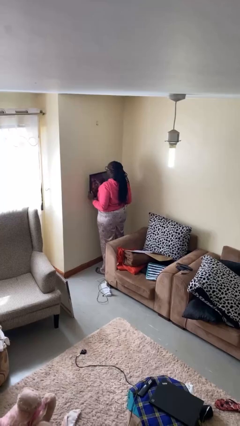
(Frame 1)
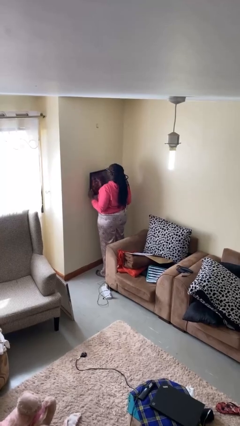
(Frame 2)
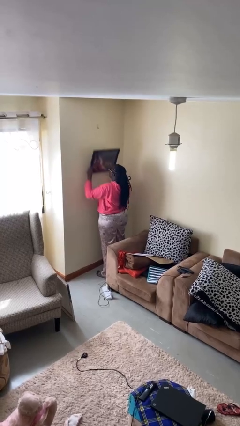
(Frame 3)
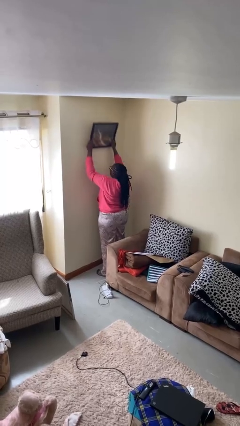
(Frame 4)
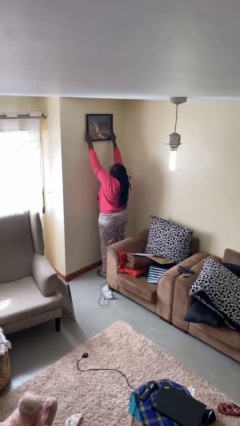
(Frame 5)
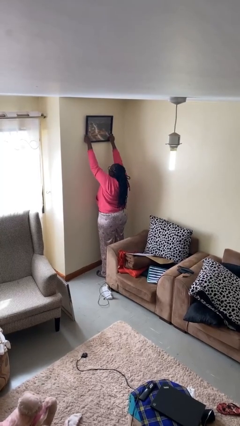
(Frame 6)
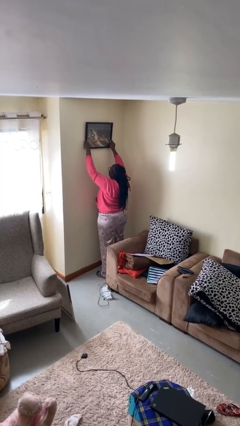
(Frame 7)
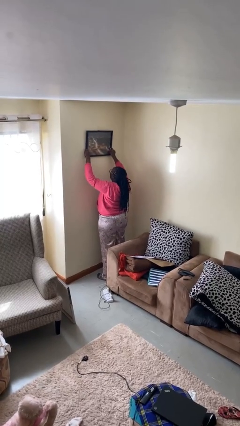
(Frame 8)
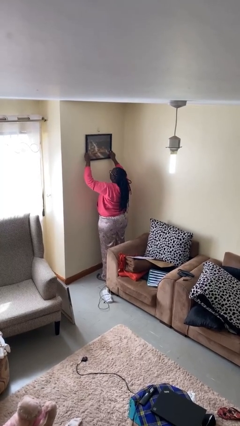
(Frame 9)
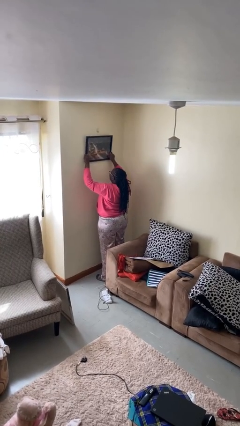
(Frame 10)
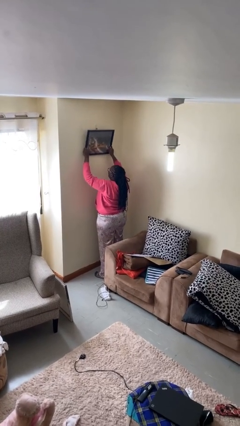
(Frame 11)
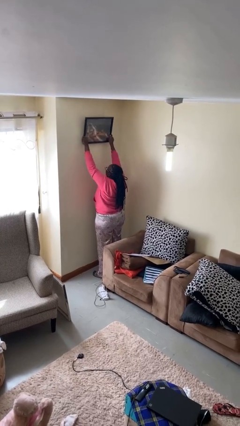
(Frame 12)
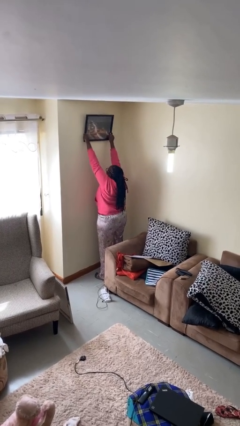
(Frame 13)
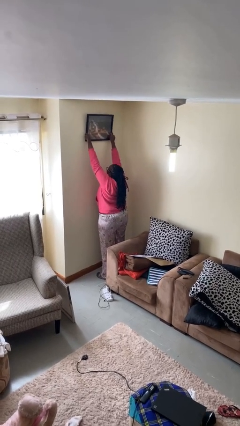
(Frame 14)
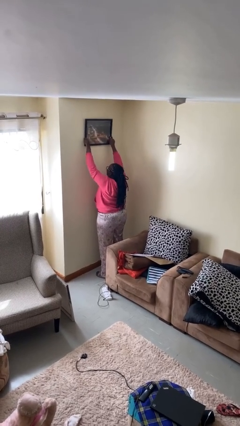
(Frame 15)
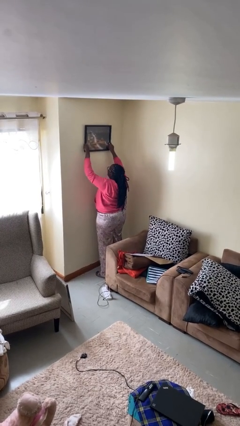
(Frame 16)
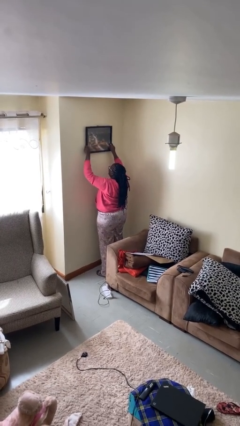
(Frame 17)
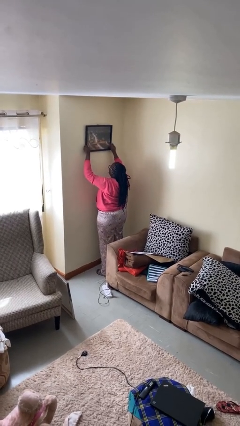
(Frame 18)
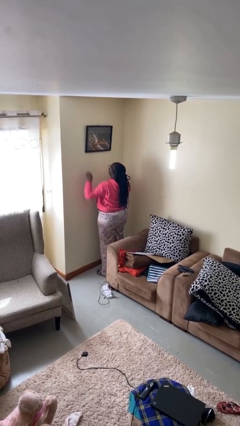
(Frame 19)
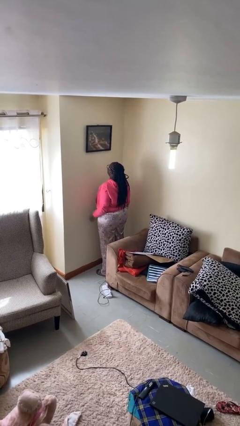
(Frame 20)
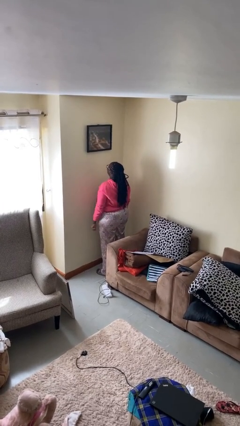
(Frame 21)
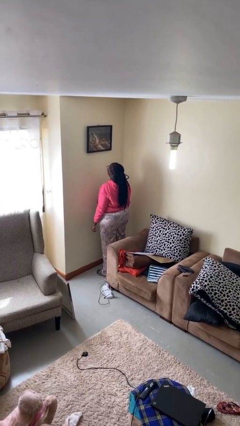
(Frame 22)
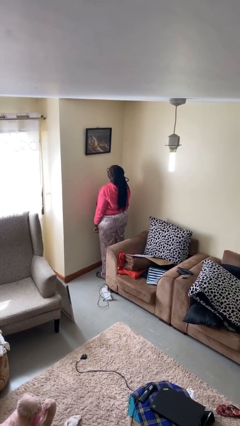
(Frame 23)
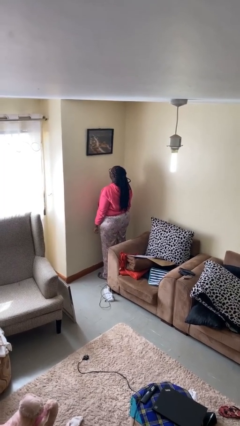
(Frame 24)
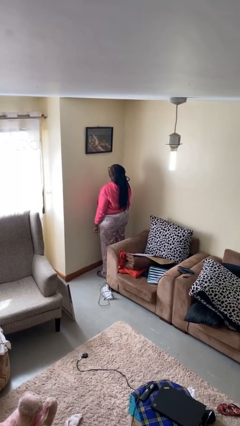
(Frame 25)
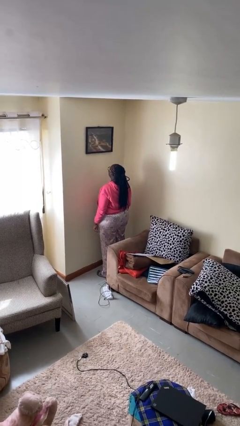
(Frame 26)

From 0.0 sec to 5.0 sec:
person puts up picture frame

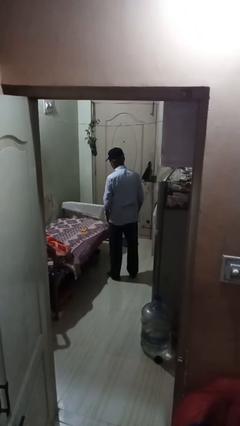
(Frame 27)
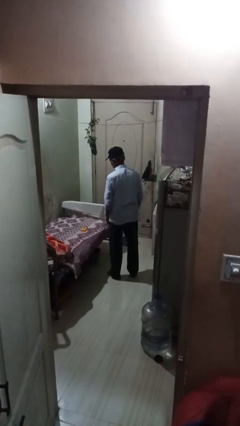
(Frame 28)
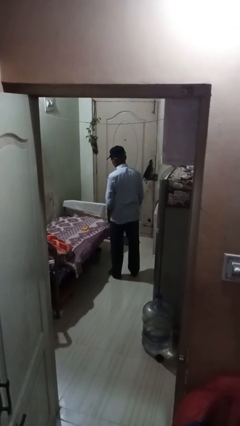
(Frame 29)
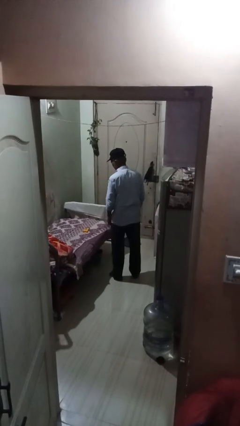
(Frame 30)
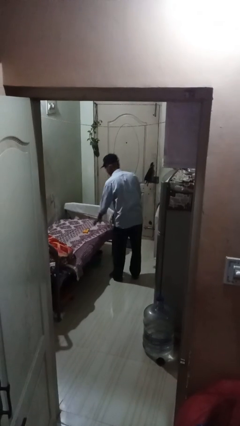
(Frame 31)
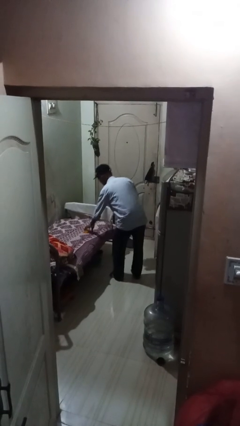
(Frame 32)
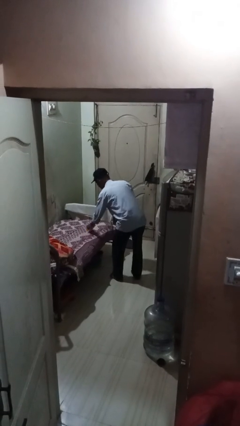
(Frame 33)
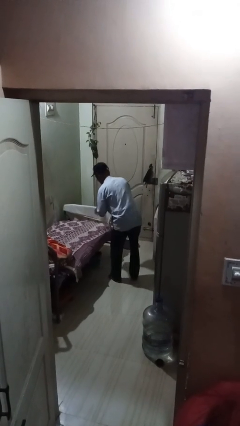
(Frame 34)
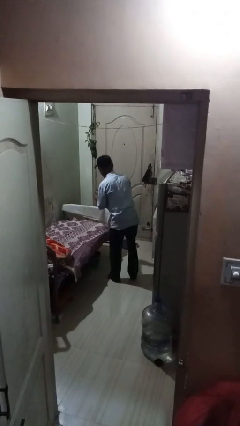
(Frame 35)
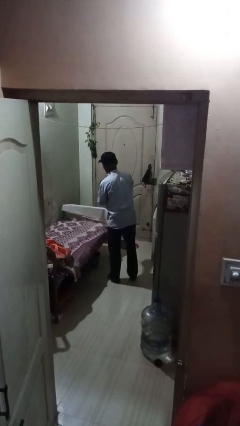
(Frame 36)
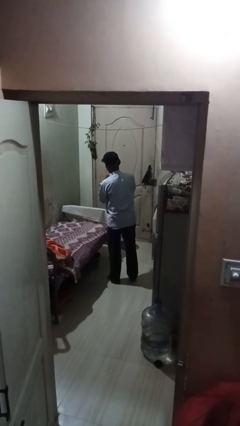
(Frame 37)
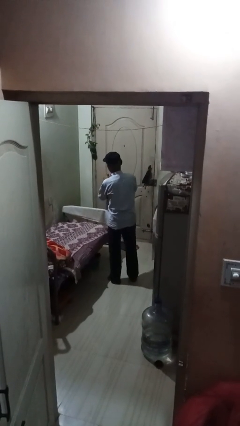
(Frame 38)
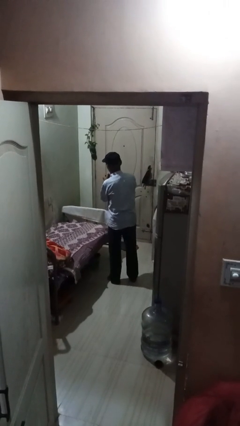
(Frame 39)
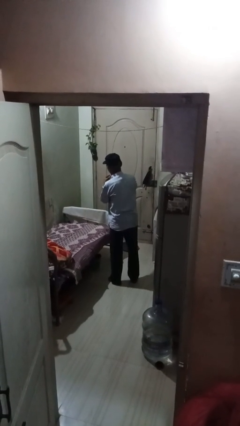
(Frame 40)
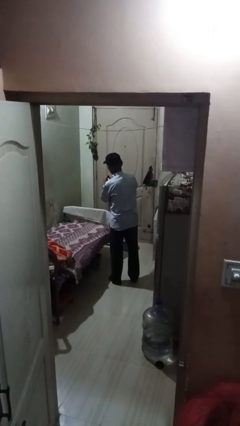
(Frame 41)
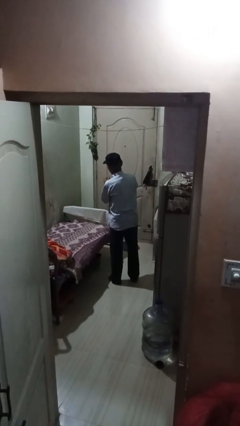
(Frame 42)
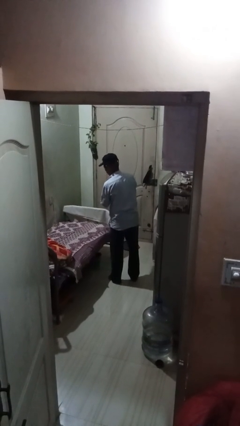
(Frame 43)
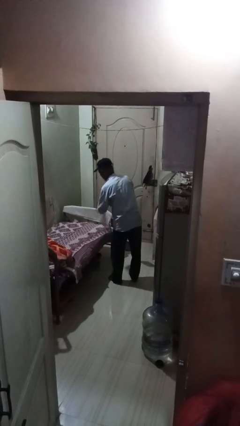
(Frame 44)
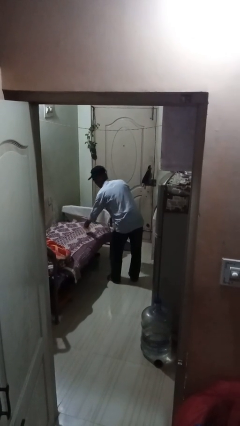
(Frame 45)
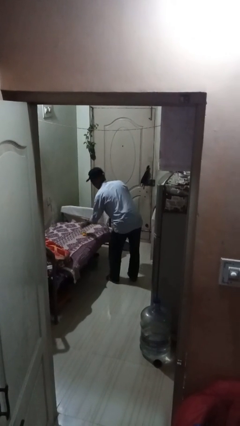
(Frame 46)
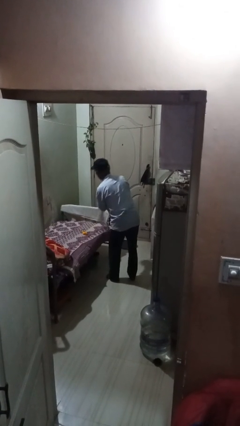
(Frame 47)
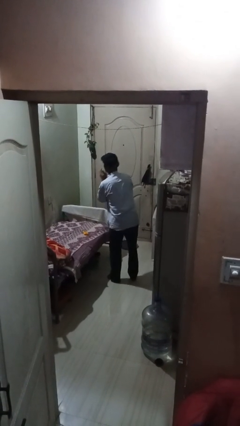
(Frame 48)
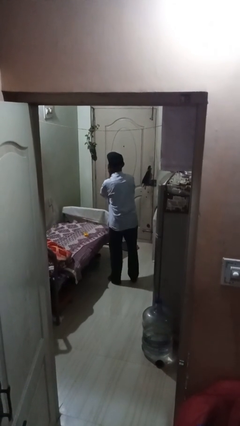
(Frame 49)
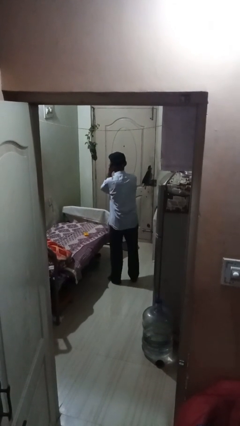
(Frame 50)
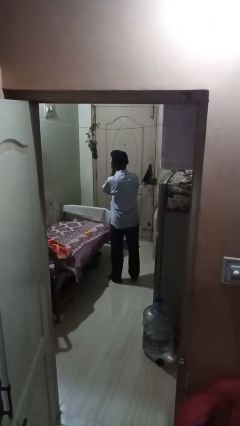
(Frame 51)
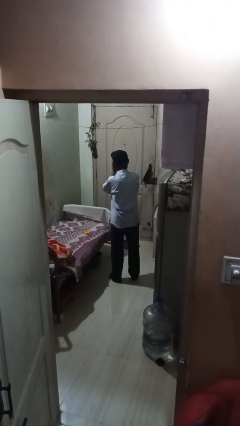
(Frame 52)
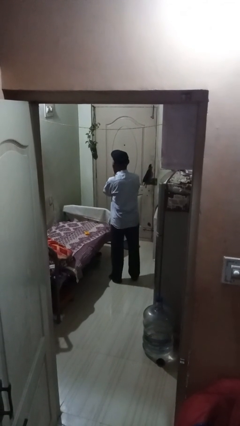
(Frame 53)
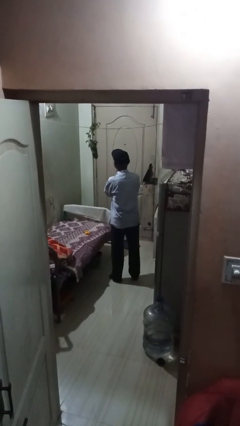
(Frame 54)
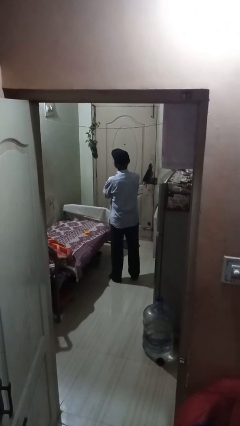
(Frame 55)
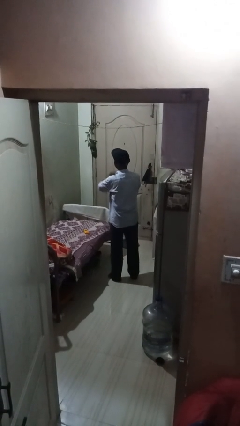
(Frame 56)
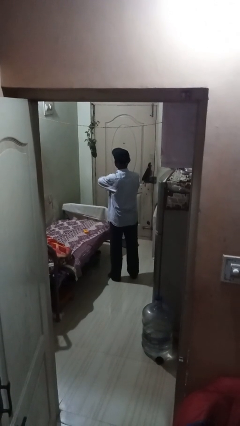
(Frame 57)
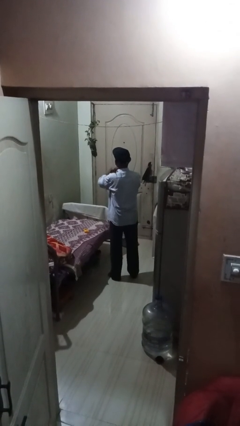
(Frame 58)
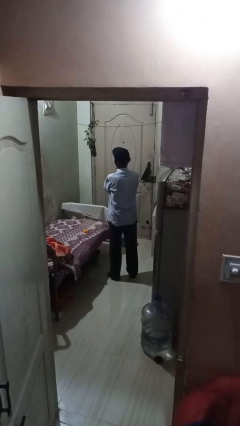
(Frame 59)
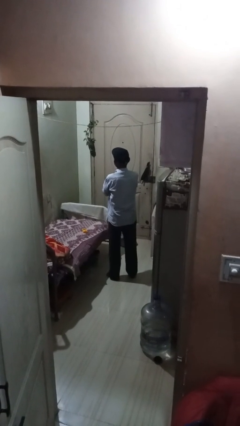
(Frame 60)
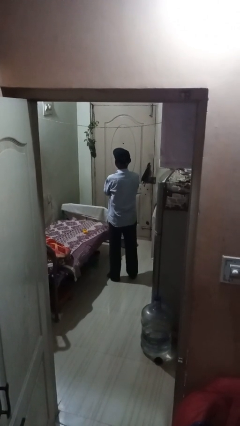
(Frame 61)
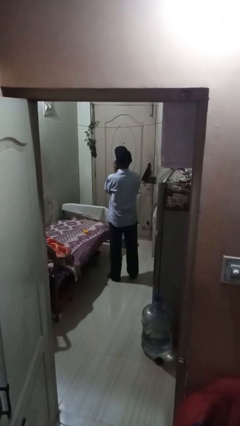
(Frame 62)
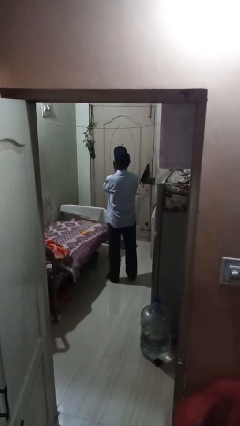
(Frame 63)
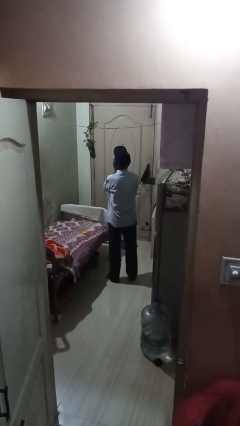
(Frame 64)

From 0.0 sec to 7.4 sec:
person applies sunscreen

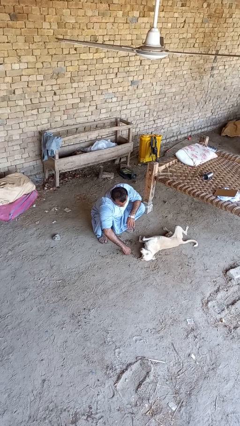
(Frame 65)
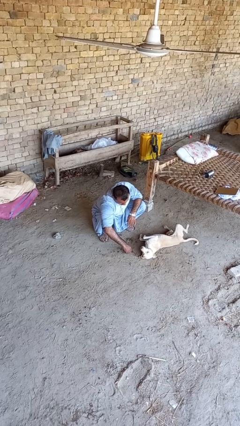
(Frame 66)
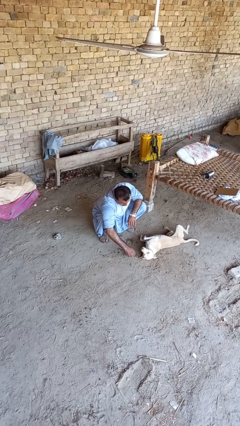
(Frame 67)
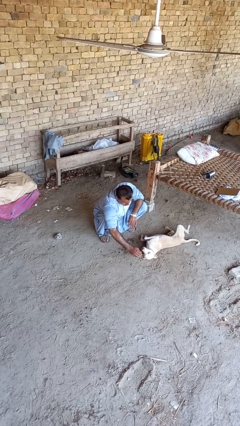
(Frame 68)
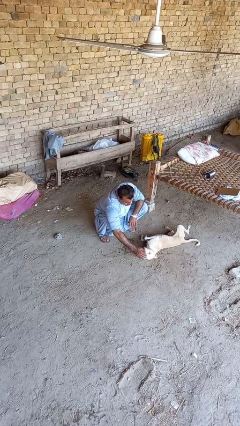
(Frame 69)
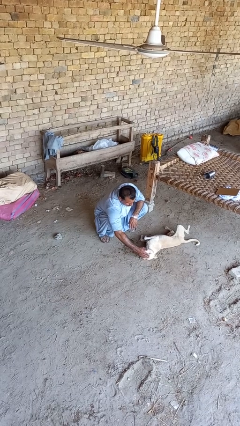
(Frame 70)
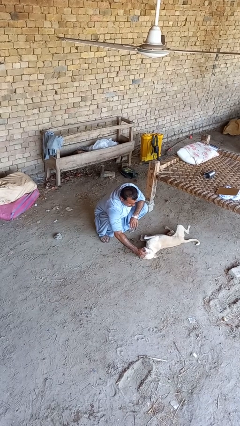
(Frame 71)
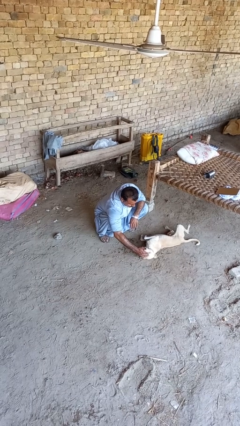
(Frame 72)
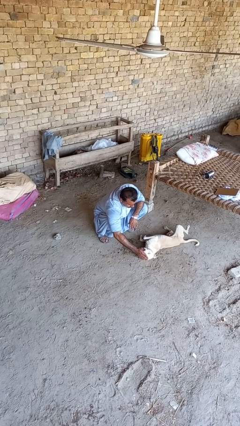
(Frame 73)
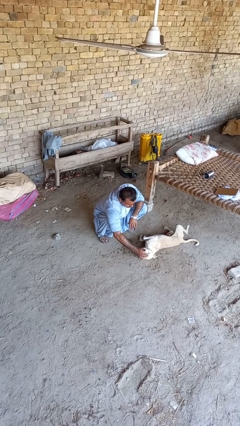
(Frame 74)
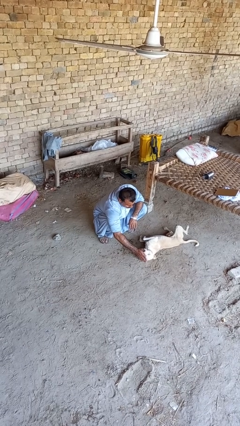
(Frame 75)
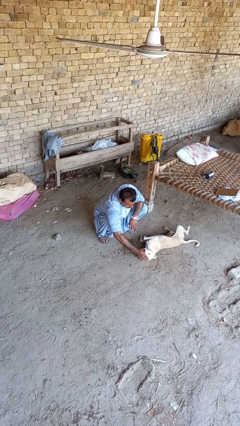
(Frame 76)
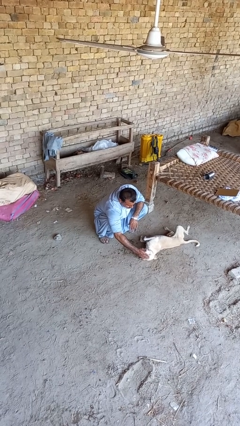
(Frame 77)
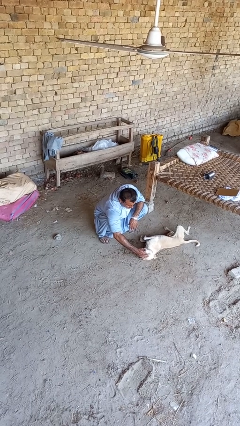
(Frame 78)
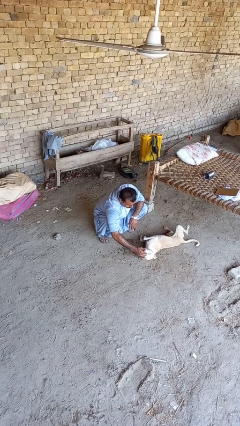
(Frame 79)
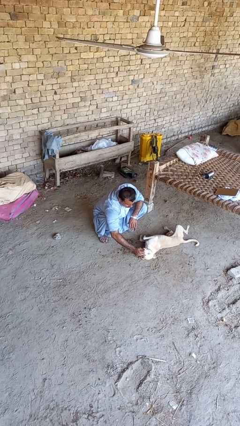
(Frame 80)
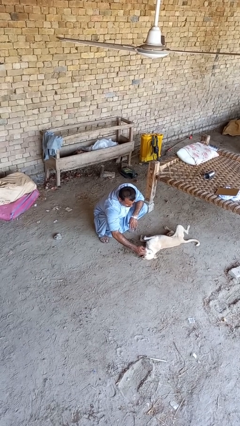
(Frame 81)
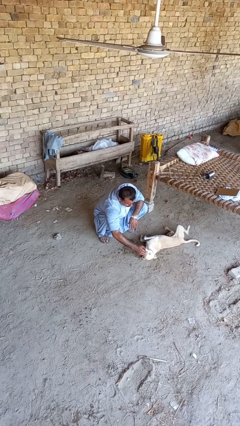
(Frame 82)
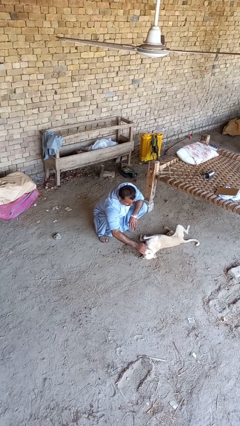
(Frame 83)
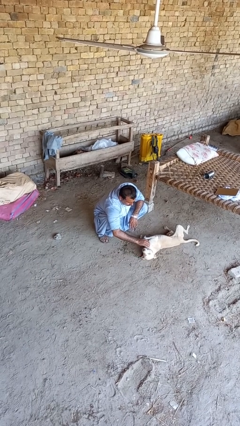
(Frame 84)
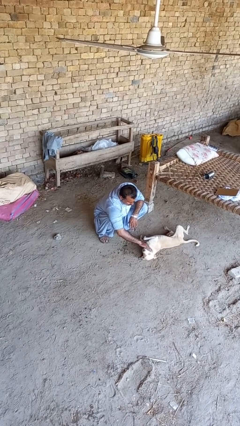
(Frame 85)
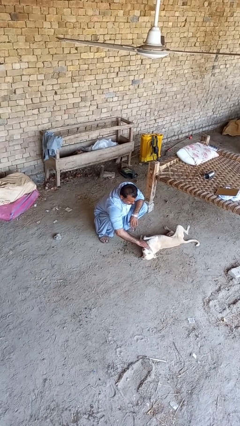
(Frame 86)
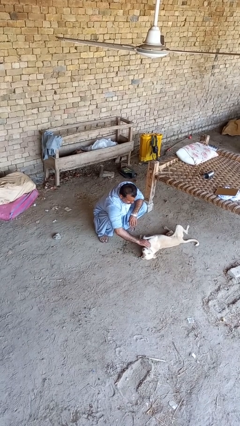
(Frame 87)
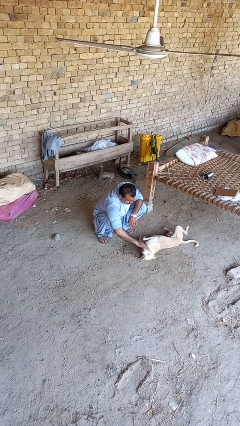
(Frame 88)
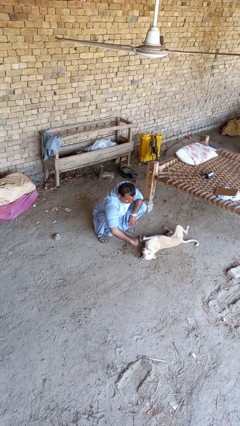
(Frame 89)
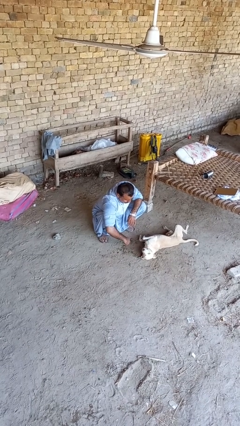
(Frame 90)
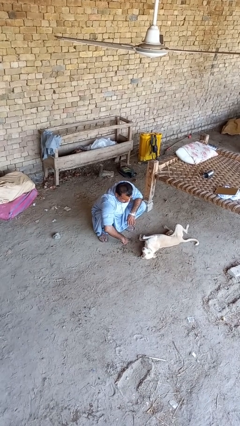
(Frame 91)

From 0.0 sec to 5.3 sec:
person pets dog
